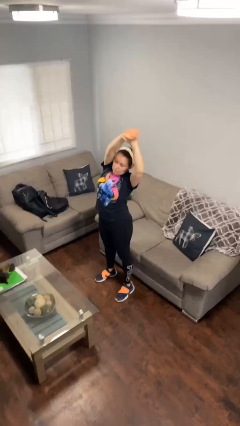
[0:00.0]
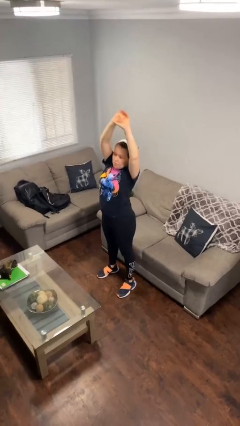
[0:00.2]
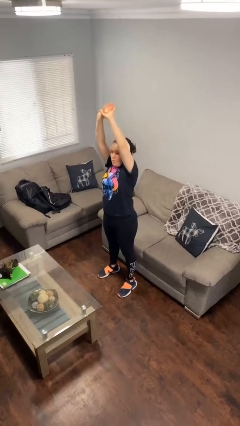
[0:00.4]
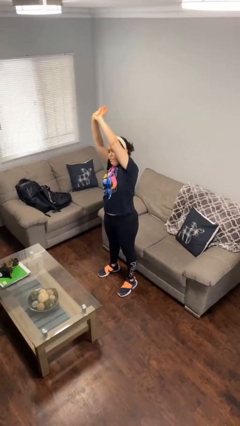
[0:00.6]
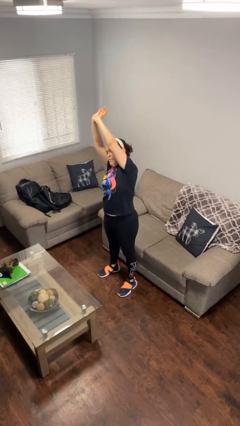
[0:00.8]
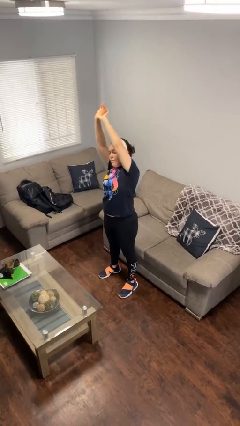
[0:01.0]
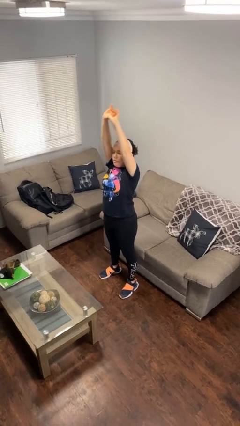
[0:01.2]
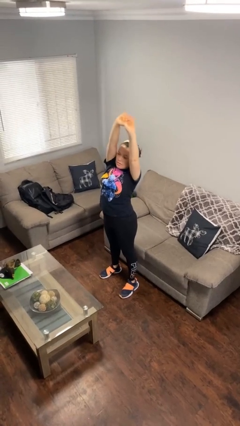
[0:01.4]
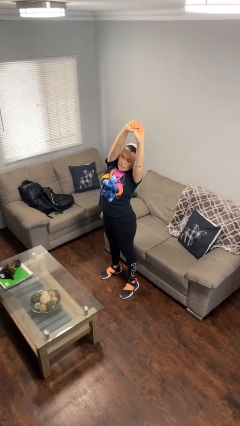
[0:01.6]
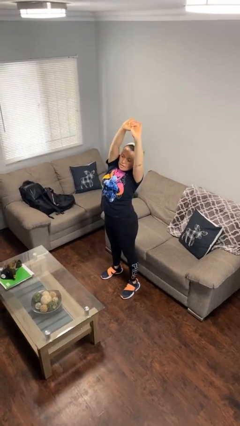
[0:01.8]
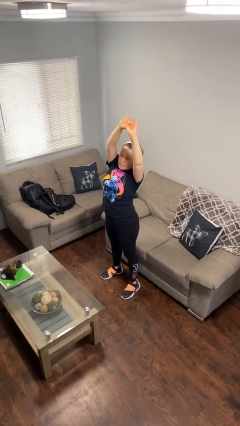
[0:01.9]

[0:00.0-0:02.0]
person stretches arms over head

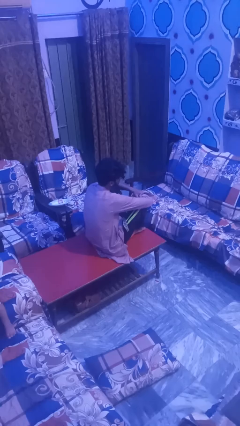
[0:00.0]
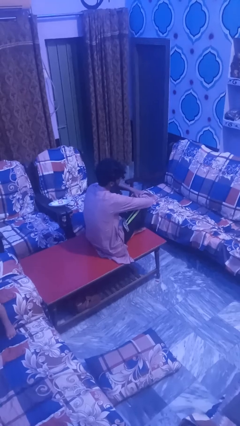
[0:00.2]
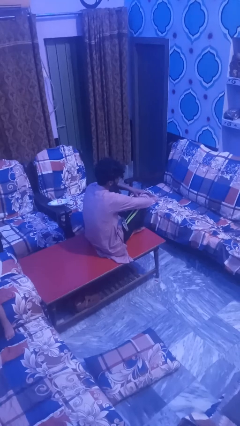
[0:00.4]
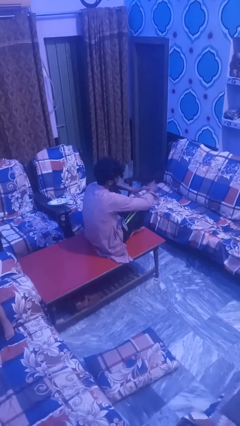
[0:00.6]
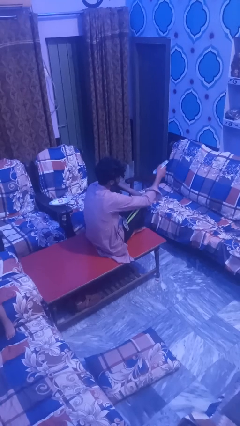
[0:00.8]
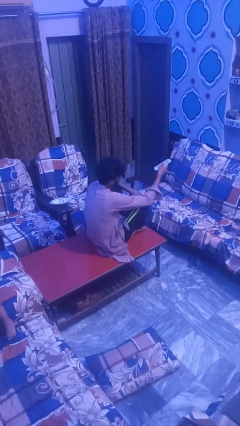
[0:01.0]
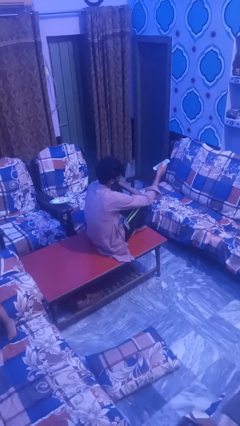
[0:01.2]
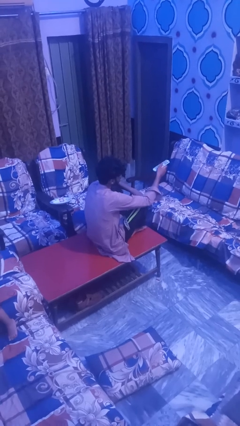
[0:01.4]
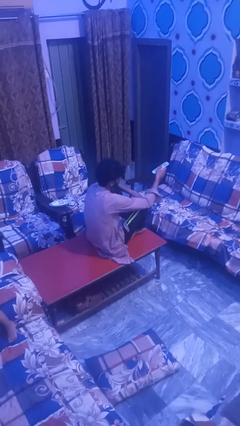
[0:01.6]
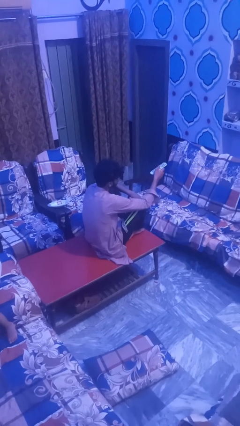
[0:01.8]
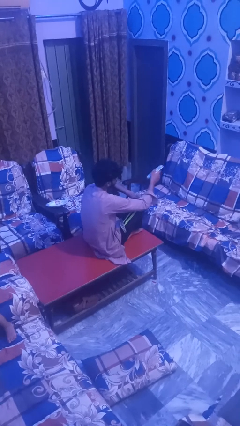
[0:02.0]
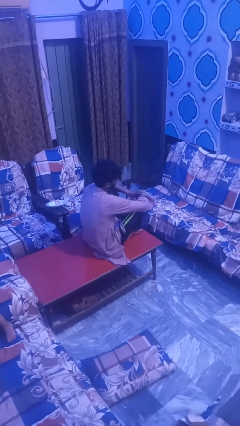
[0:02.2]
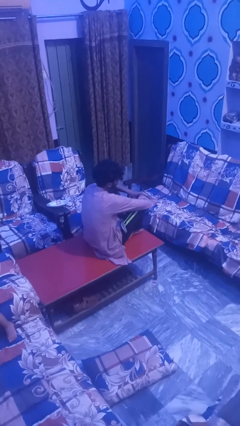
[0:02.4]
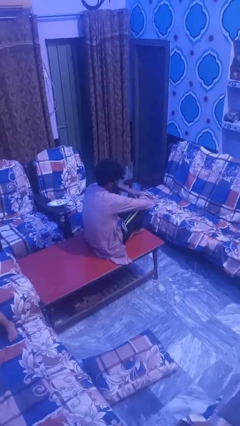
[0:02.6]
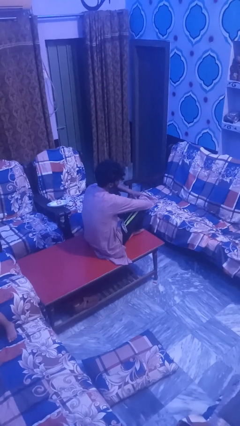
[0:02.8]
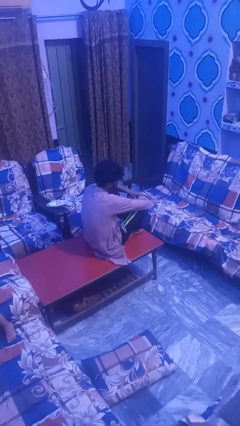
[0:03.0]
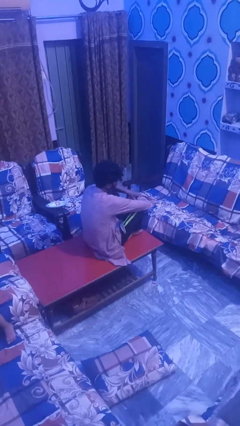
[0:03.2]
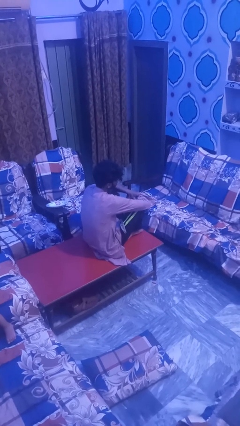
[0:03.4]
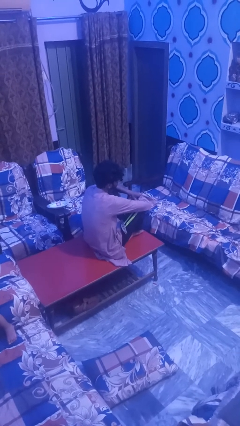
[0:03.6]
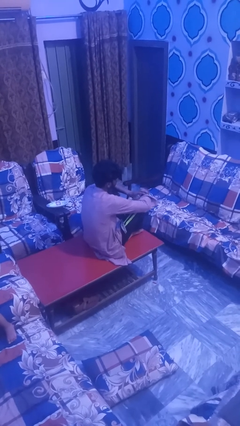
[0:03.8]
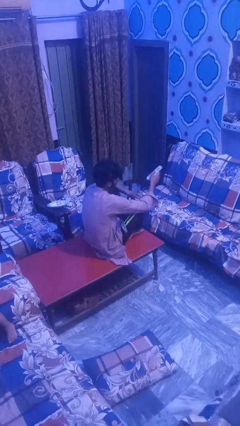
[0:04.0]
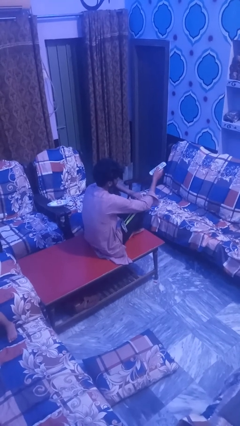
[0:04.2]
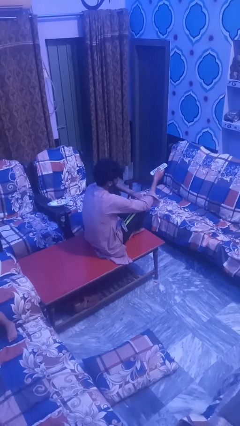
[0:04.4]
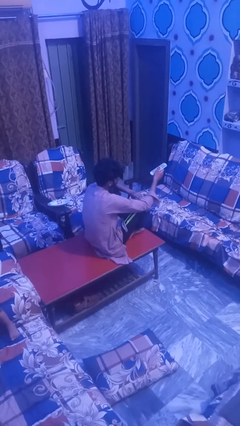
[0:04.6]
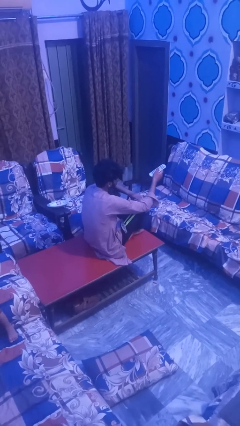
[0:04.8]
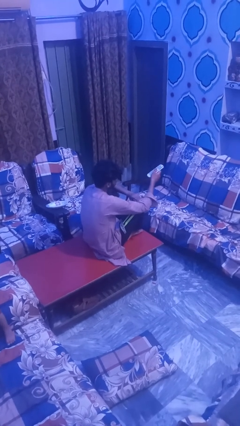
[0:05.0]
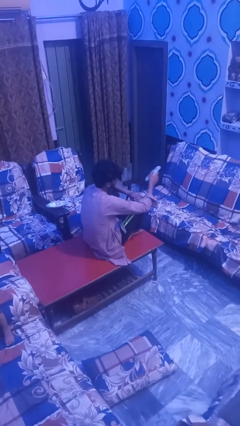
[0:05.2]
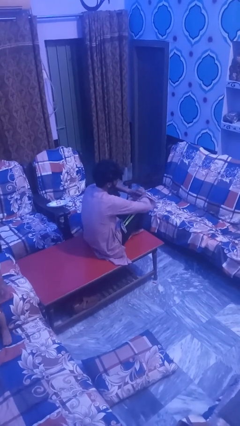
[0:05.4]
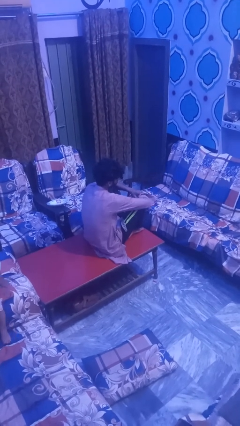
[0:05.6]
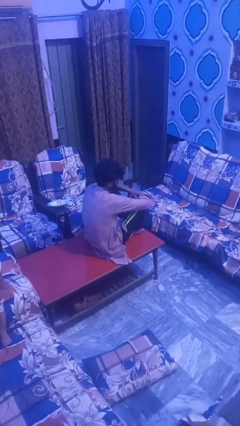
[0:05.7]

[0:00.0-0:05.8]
person uses television remote

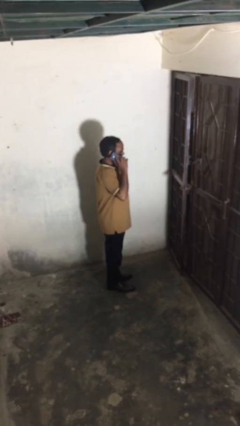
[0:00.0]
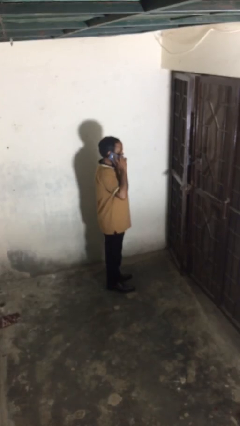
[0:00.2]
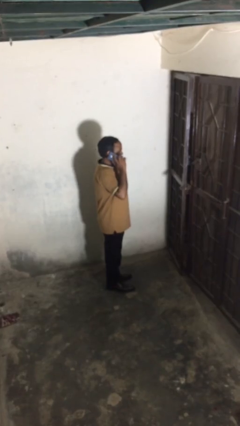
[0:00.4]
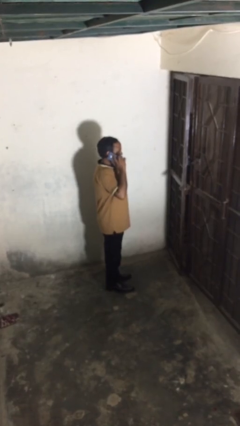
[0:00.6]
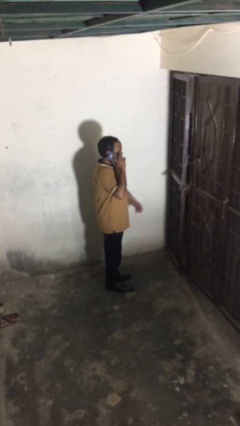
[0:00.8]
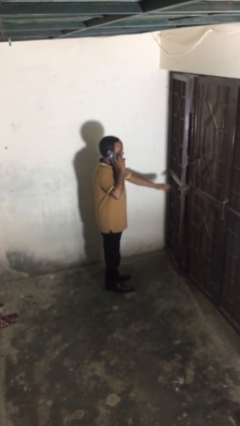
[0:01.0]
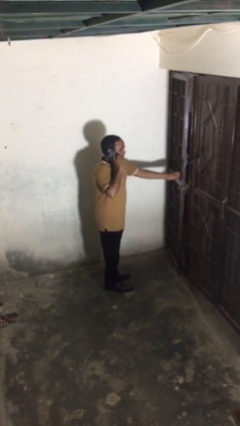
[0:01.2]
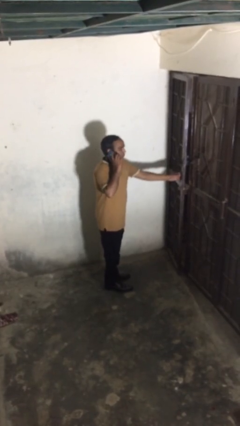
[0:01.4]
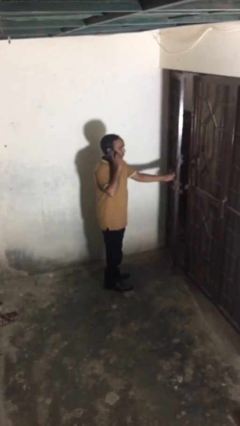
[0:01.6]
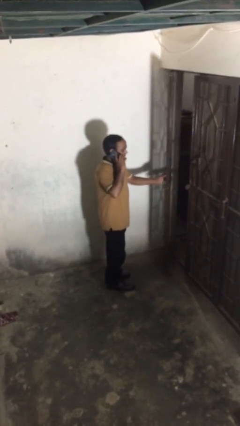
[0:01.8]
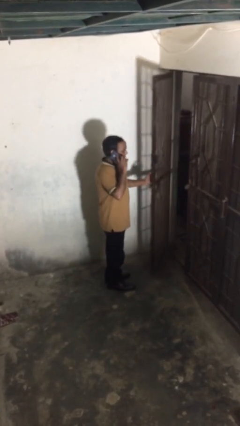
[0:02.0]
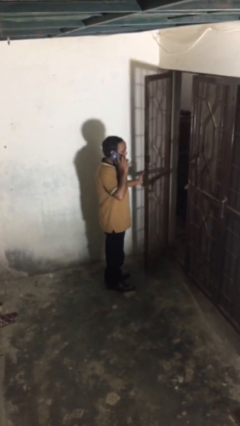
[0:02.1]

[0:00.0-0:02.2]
person opens facility door

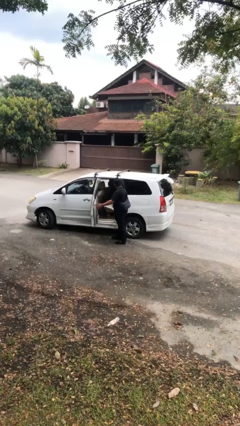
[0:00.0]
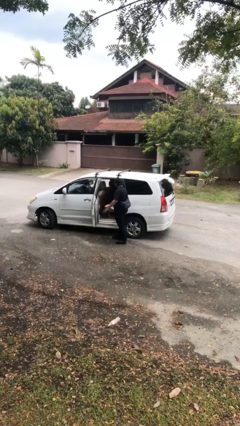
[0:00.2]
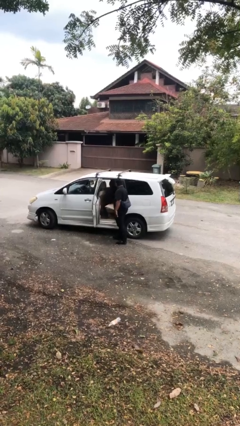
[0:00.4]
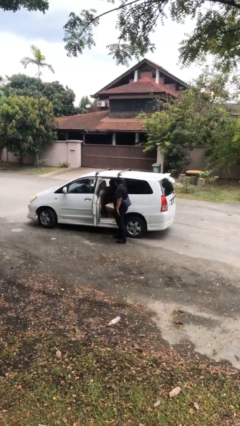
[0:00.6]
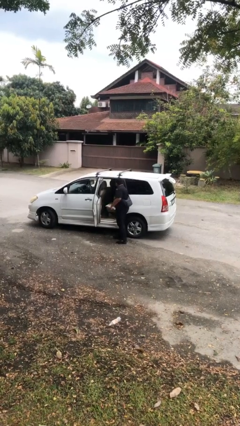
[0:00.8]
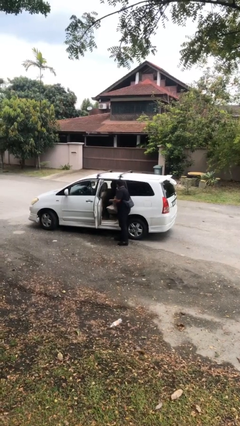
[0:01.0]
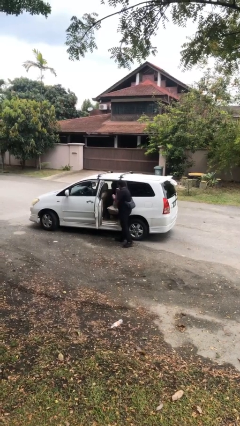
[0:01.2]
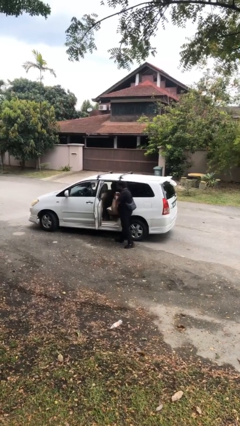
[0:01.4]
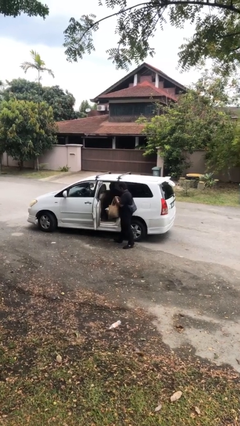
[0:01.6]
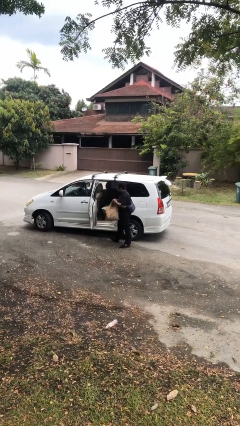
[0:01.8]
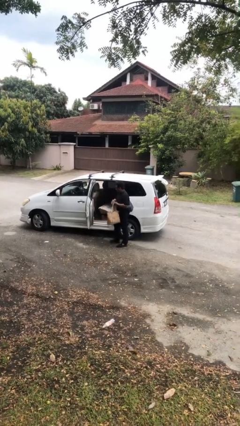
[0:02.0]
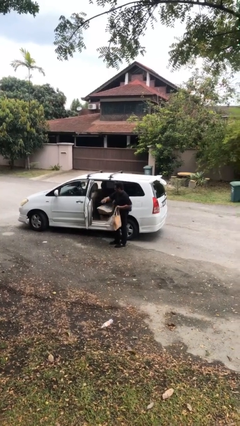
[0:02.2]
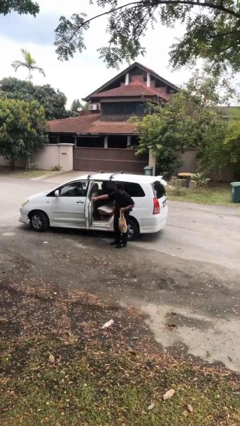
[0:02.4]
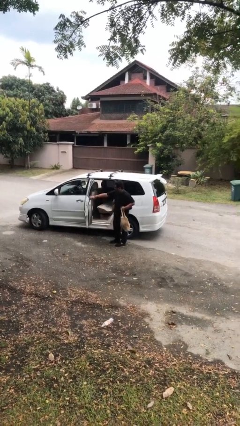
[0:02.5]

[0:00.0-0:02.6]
person unloads car

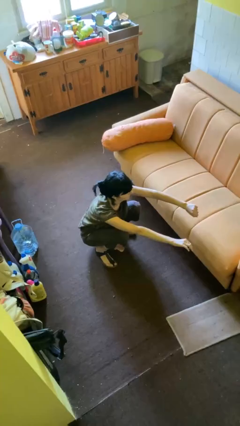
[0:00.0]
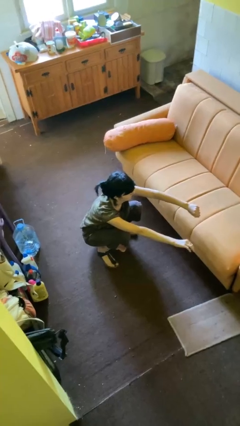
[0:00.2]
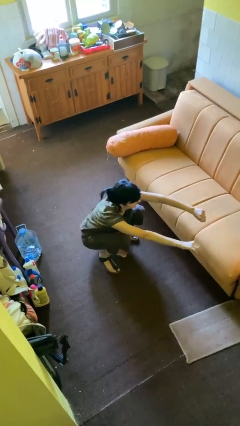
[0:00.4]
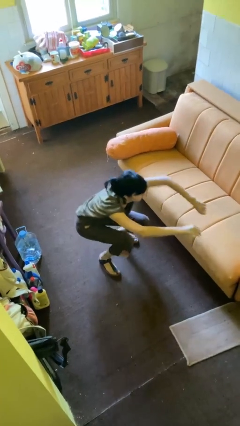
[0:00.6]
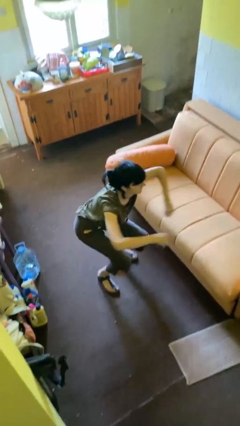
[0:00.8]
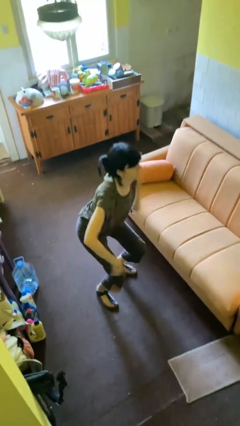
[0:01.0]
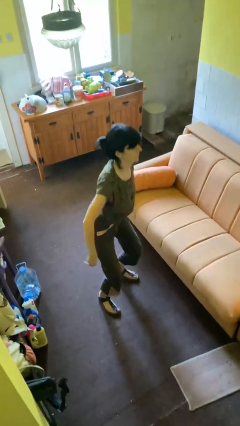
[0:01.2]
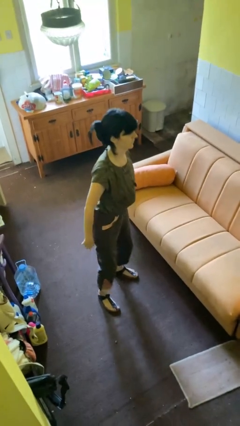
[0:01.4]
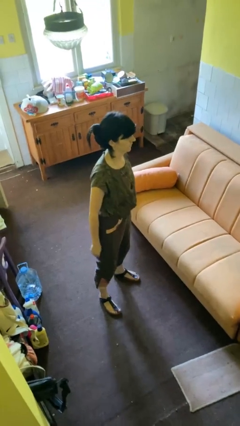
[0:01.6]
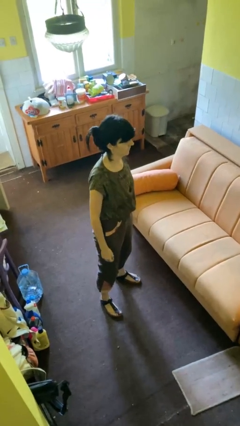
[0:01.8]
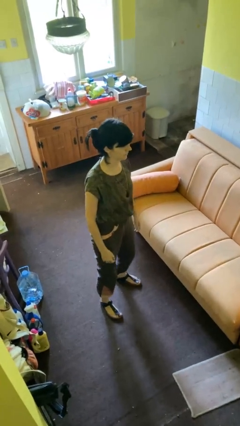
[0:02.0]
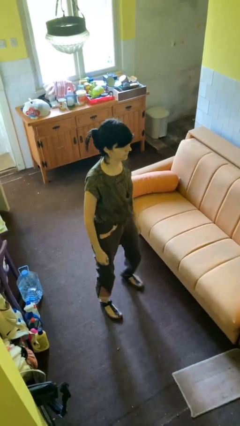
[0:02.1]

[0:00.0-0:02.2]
person stands up

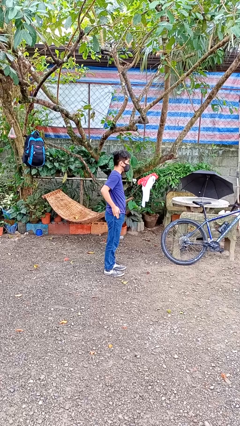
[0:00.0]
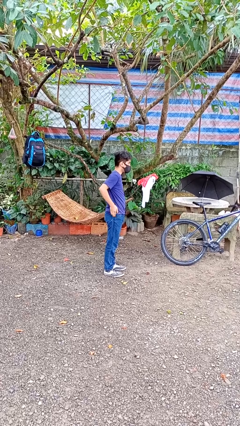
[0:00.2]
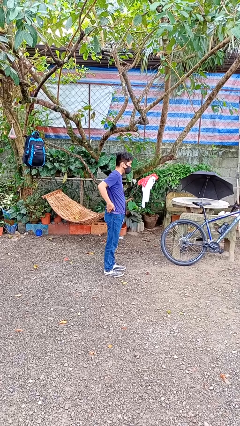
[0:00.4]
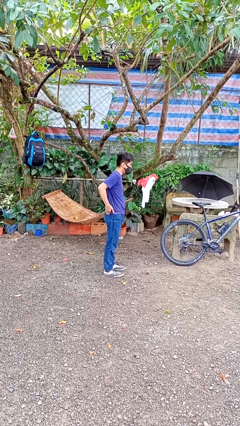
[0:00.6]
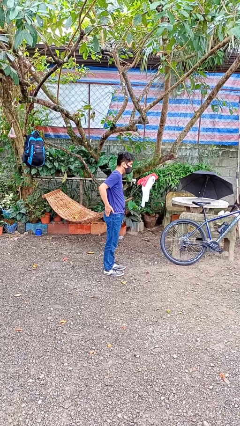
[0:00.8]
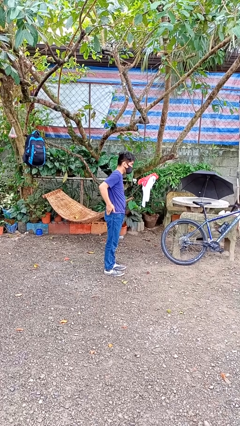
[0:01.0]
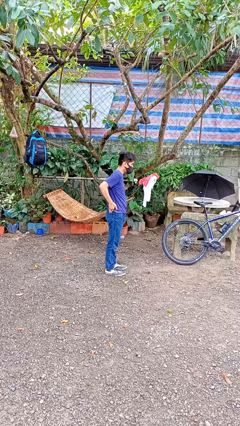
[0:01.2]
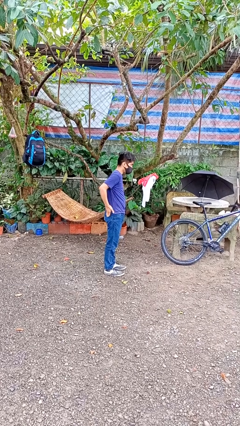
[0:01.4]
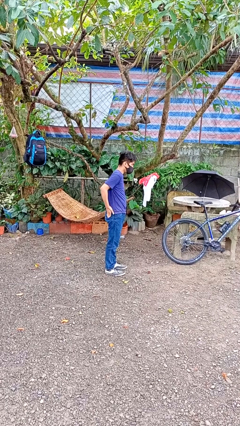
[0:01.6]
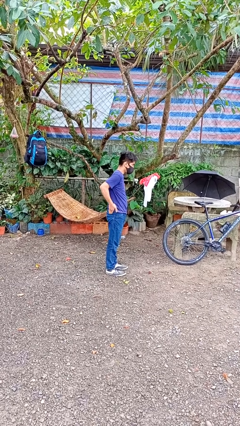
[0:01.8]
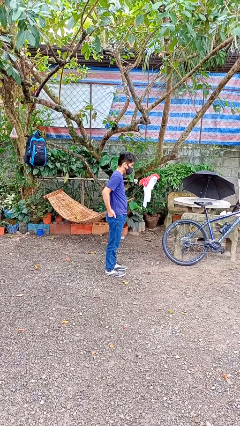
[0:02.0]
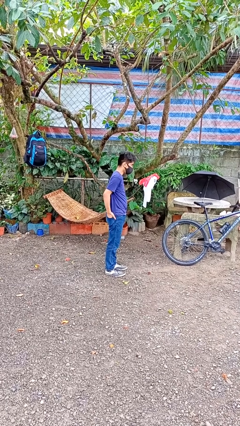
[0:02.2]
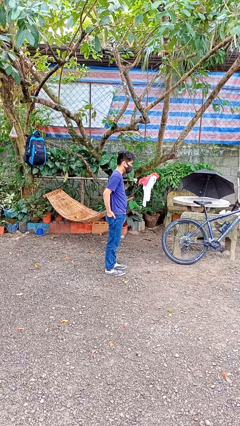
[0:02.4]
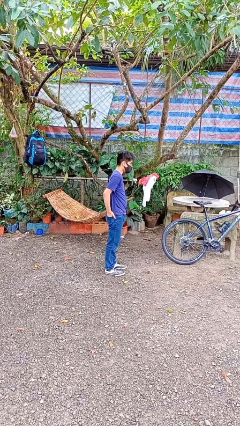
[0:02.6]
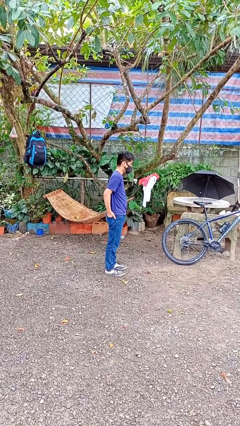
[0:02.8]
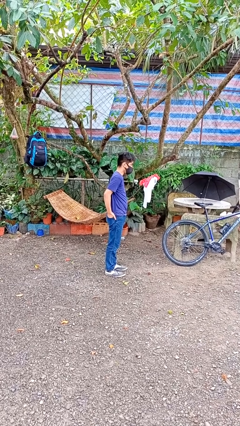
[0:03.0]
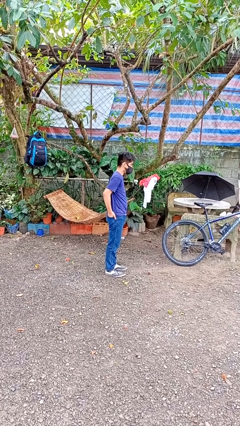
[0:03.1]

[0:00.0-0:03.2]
person puts hands in back pockets
